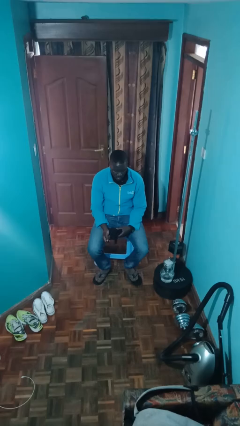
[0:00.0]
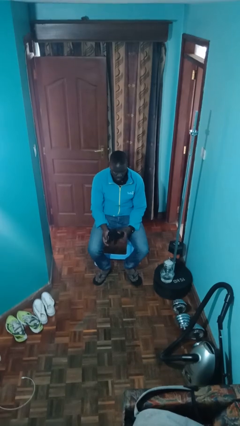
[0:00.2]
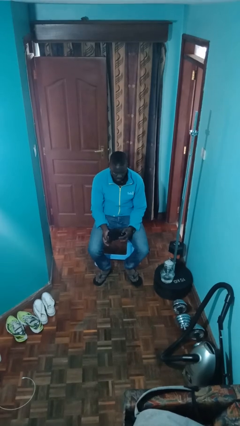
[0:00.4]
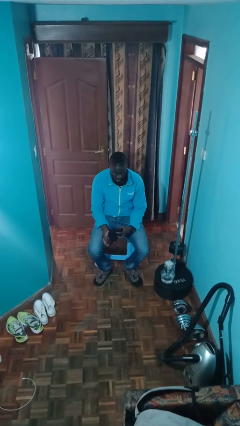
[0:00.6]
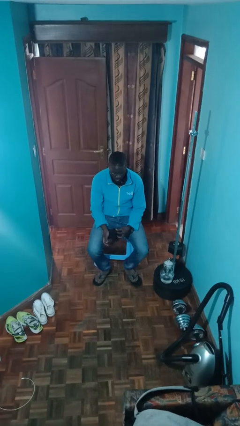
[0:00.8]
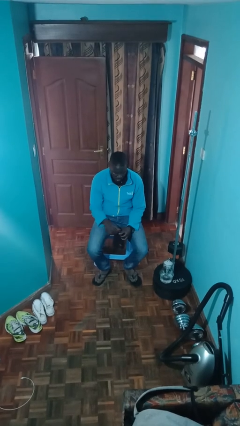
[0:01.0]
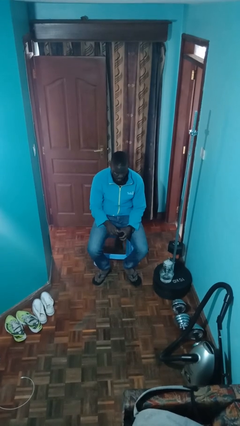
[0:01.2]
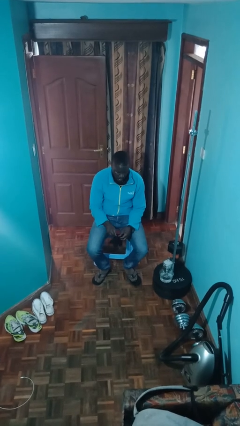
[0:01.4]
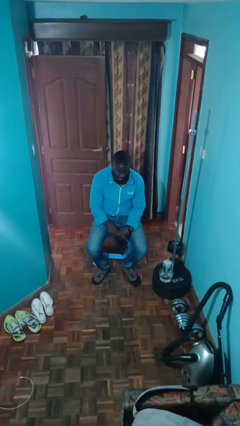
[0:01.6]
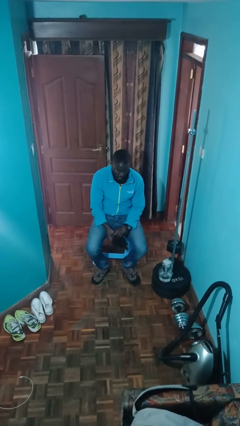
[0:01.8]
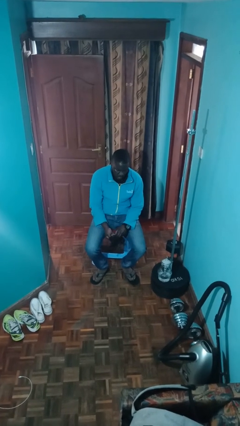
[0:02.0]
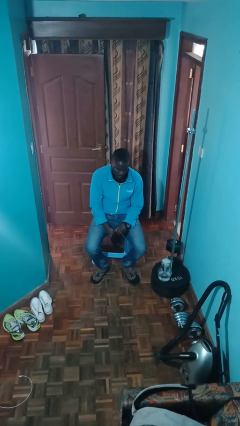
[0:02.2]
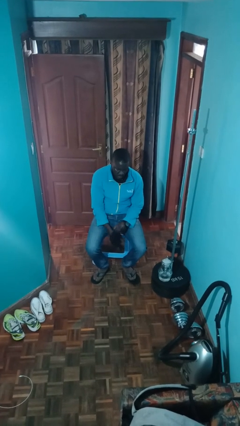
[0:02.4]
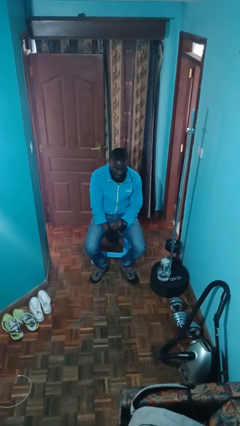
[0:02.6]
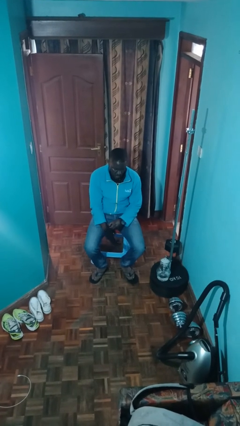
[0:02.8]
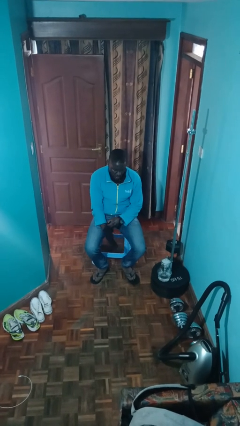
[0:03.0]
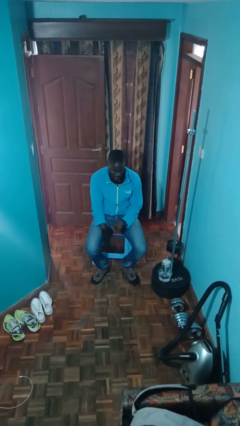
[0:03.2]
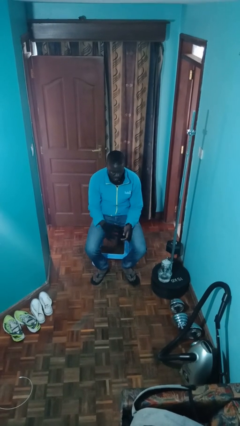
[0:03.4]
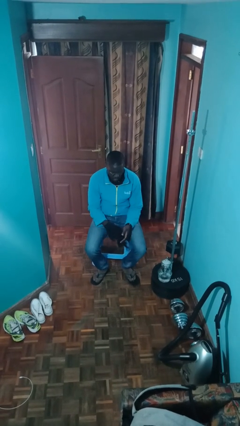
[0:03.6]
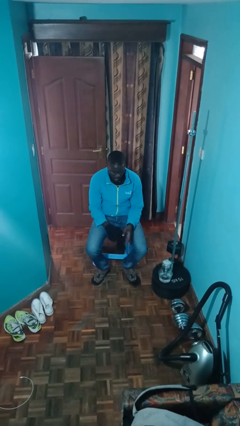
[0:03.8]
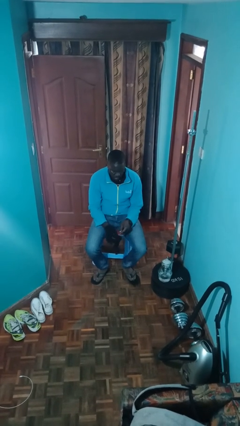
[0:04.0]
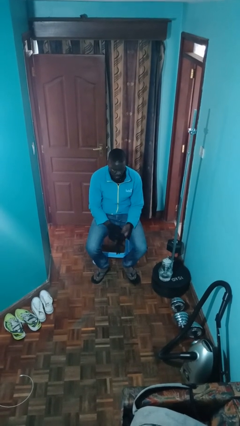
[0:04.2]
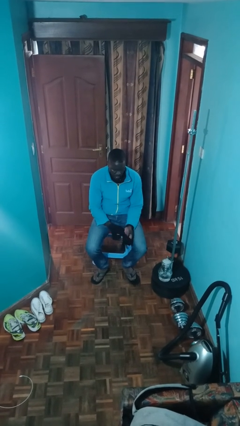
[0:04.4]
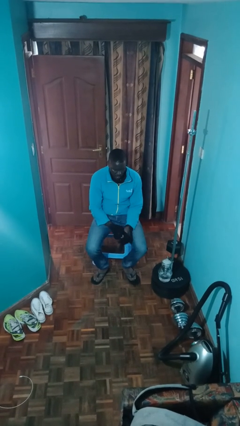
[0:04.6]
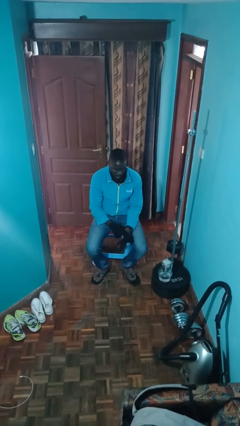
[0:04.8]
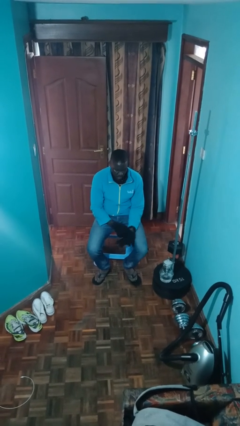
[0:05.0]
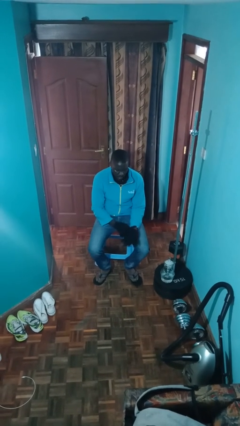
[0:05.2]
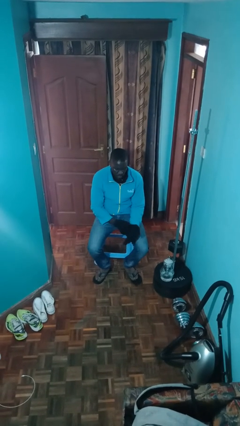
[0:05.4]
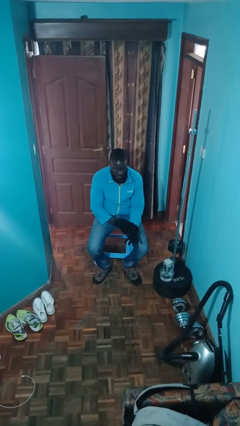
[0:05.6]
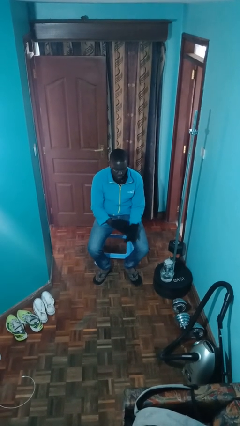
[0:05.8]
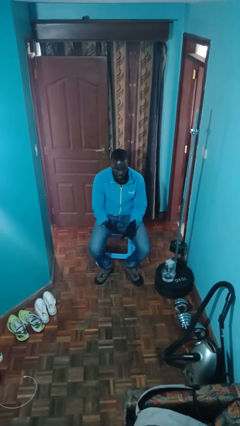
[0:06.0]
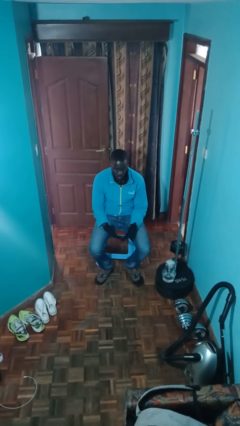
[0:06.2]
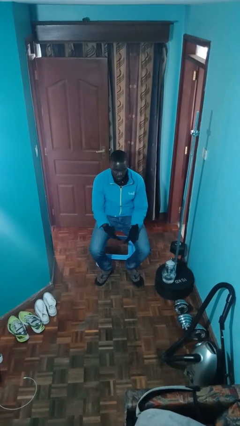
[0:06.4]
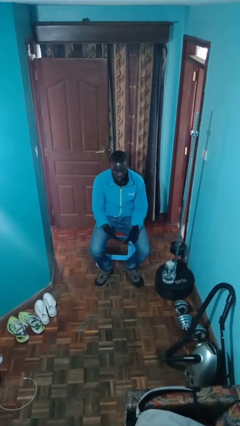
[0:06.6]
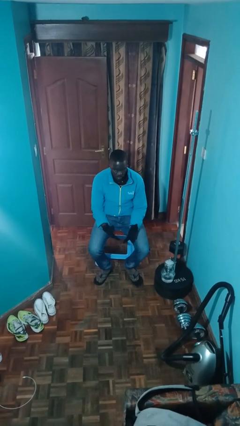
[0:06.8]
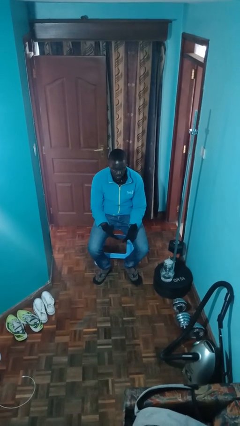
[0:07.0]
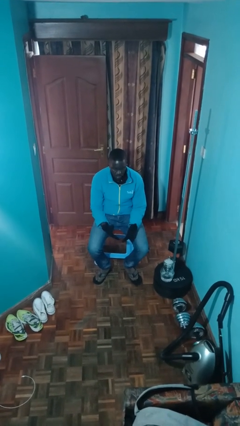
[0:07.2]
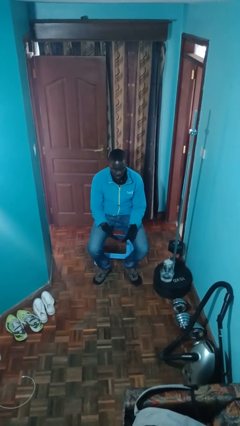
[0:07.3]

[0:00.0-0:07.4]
person puts on gloves

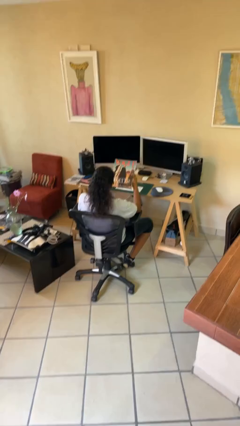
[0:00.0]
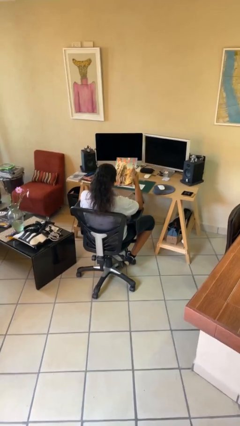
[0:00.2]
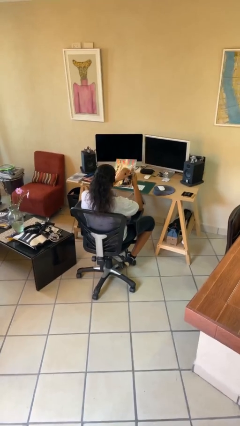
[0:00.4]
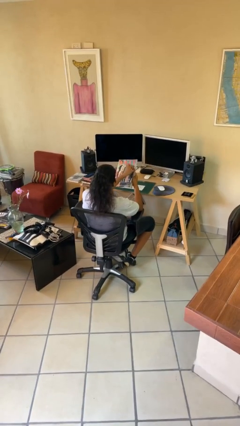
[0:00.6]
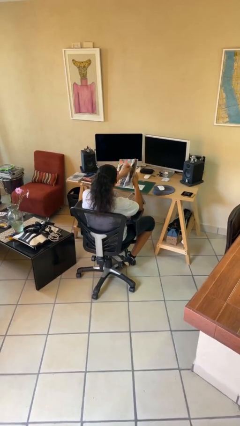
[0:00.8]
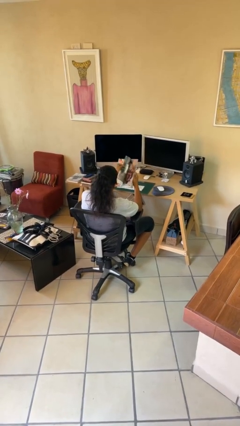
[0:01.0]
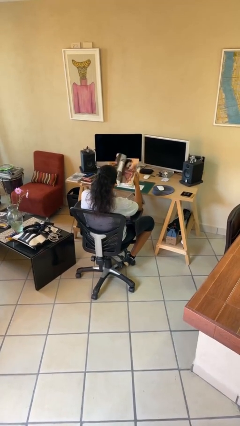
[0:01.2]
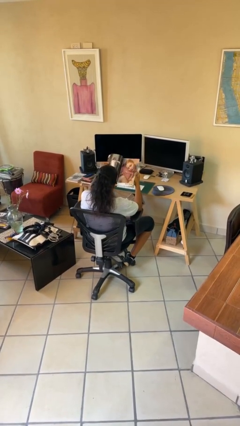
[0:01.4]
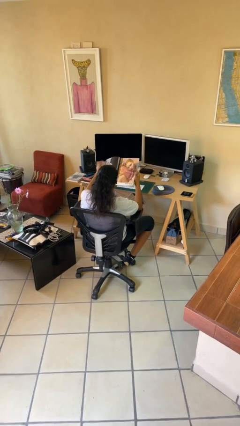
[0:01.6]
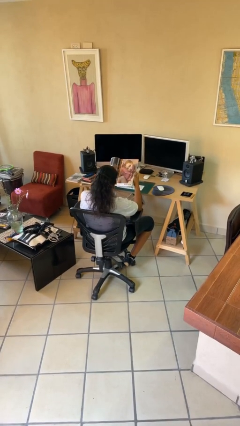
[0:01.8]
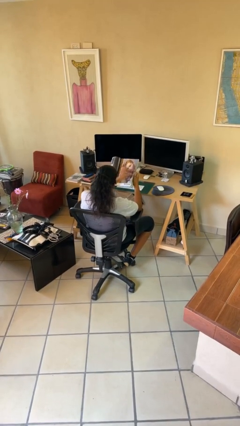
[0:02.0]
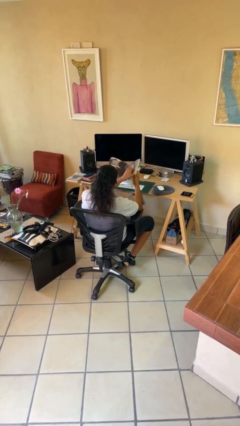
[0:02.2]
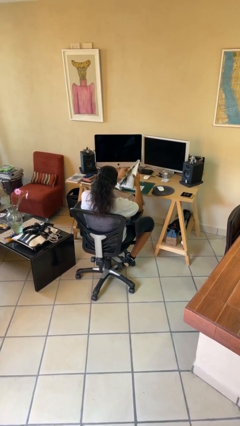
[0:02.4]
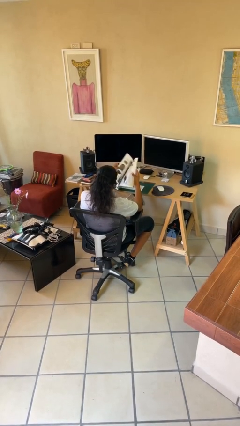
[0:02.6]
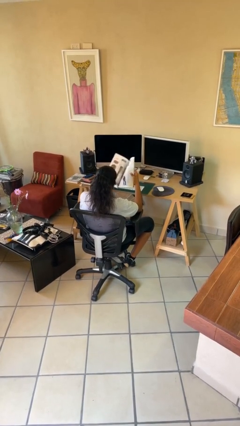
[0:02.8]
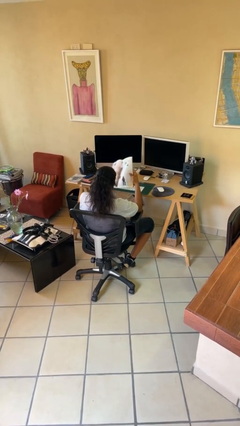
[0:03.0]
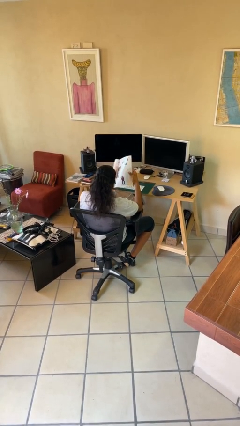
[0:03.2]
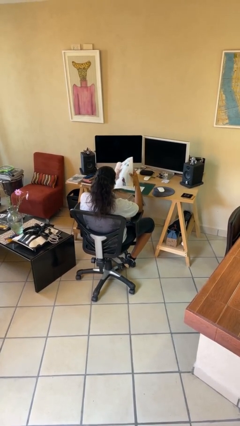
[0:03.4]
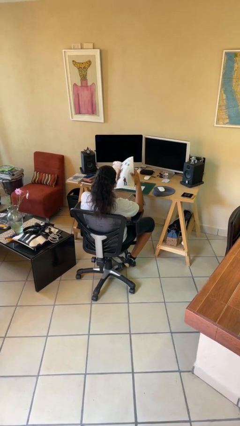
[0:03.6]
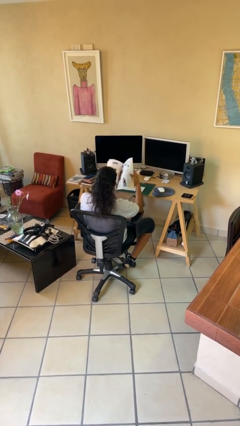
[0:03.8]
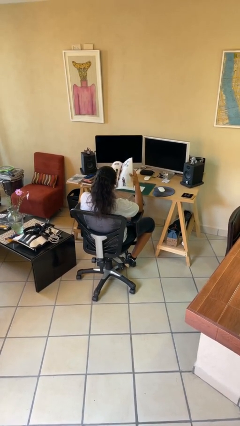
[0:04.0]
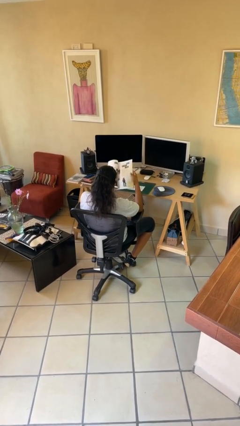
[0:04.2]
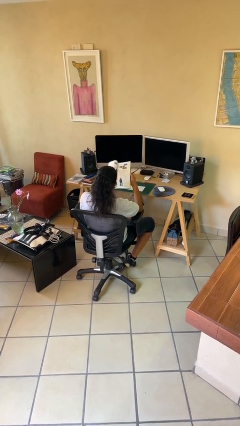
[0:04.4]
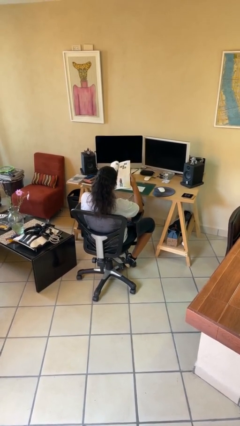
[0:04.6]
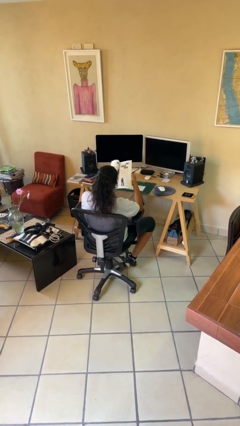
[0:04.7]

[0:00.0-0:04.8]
person reads magazine

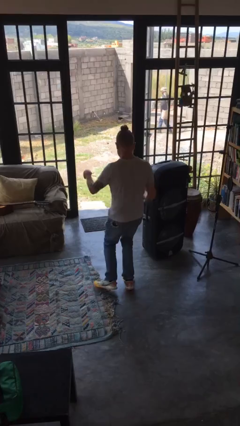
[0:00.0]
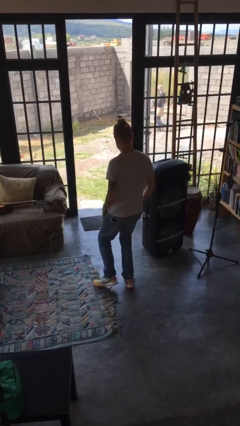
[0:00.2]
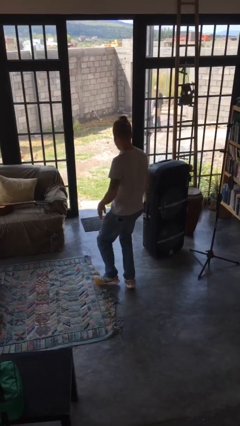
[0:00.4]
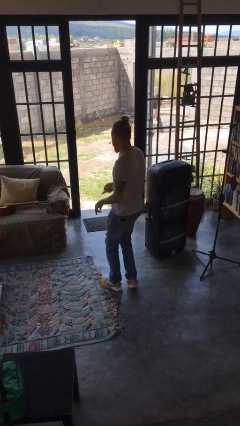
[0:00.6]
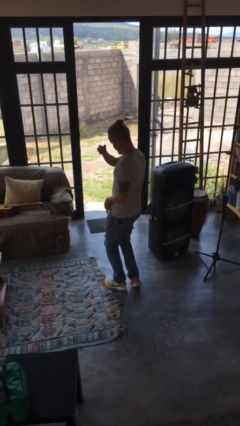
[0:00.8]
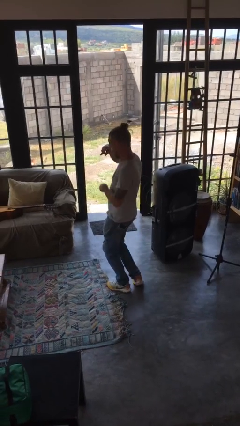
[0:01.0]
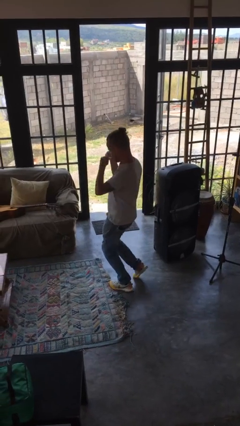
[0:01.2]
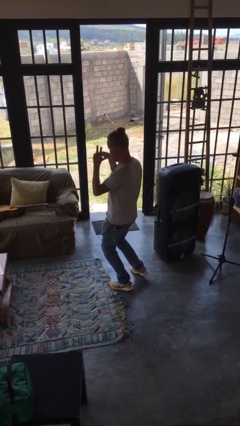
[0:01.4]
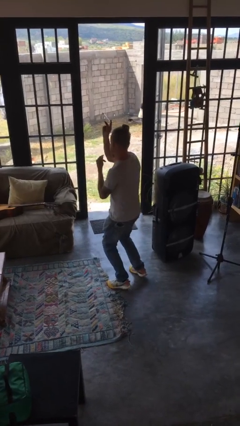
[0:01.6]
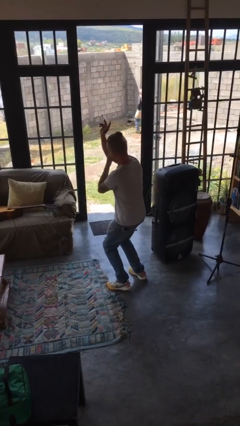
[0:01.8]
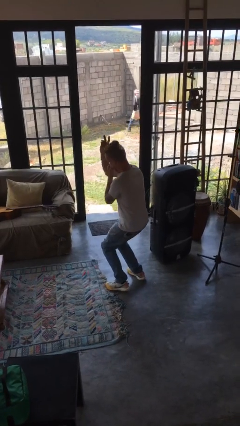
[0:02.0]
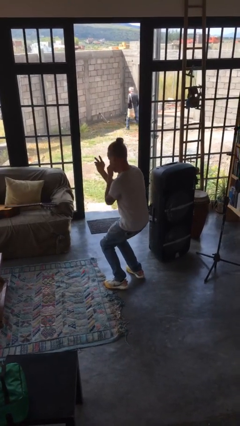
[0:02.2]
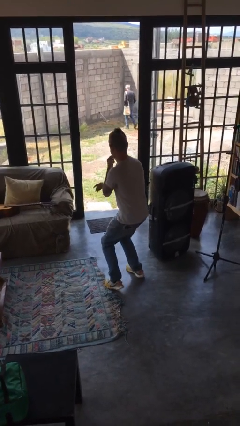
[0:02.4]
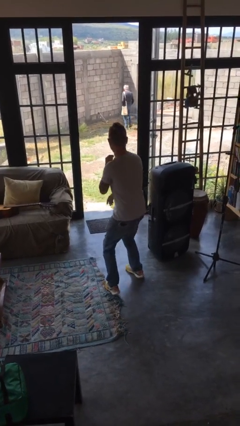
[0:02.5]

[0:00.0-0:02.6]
person dances in place

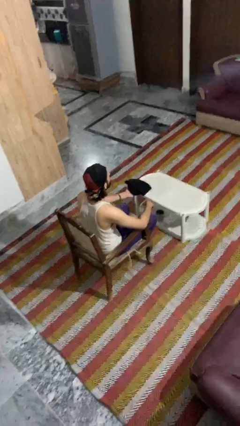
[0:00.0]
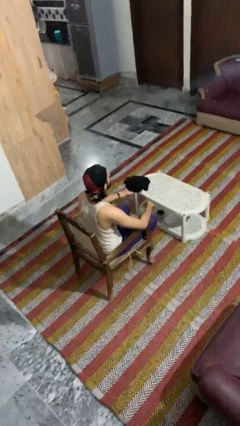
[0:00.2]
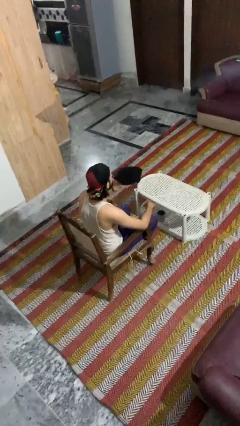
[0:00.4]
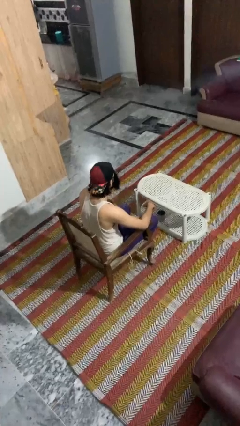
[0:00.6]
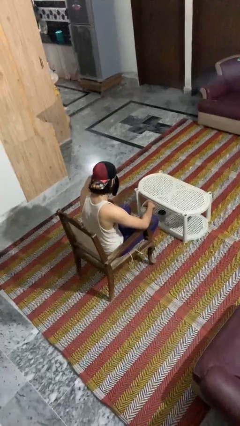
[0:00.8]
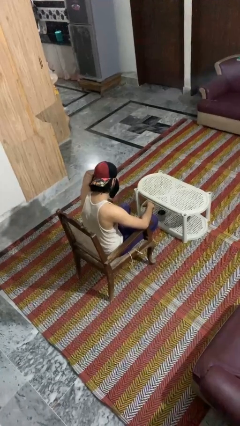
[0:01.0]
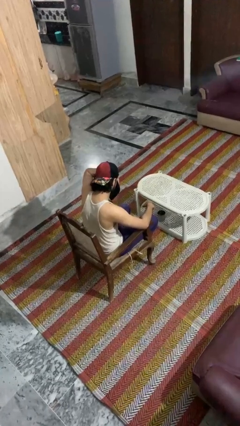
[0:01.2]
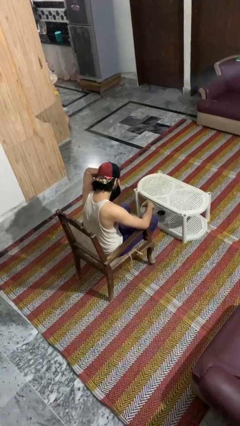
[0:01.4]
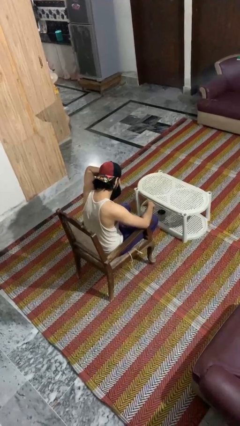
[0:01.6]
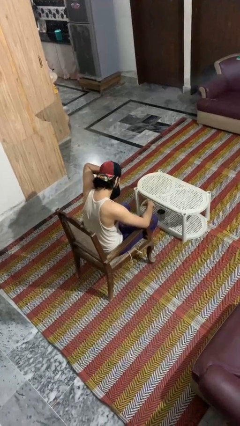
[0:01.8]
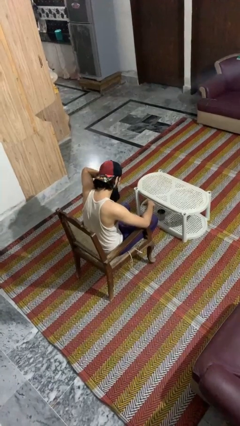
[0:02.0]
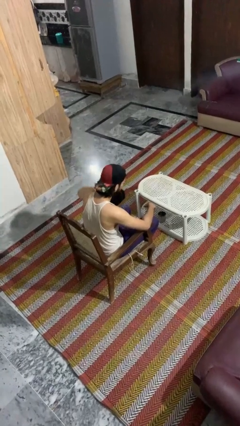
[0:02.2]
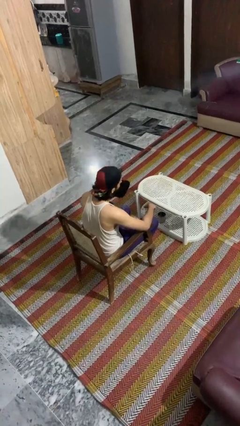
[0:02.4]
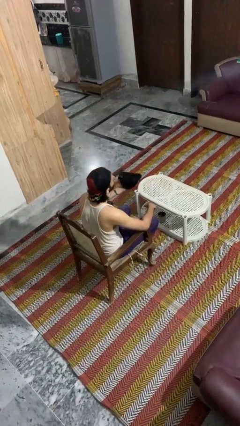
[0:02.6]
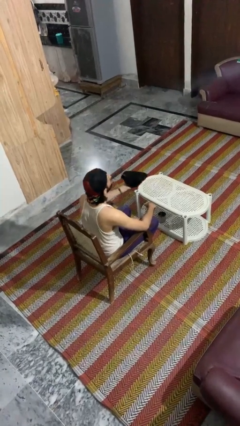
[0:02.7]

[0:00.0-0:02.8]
person blows nose

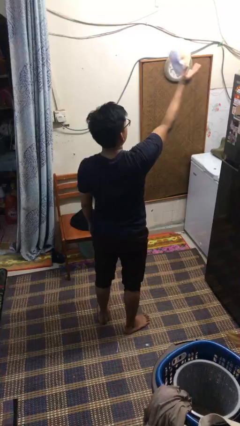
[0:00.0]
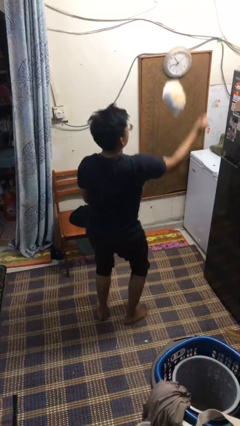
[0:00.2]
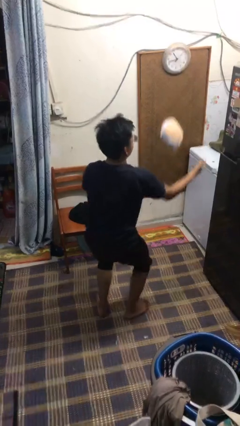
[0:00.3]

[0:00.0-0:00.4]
person drops object
